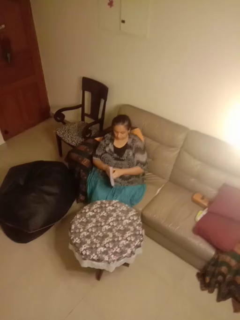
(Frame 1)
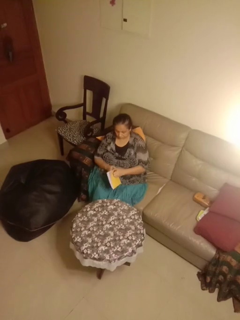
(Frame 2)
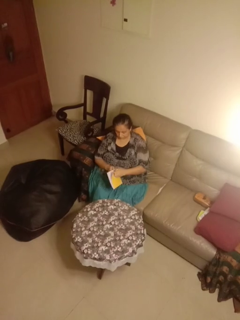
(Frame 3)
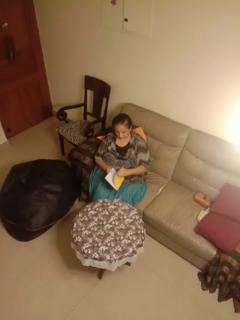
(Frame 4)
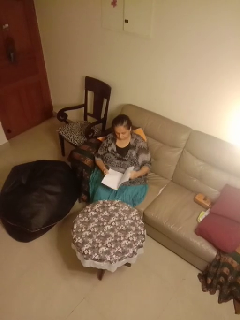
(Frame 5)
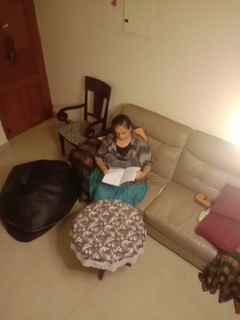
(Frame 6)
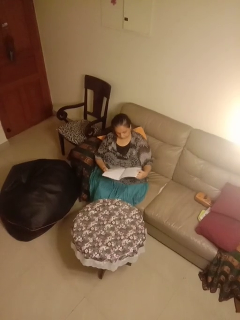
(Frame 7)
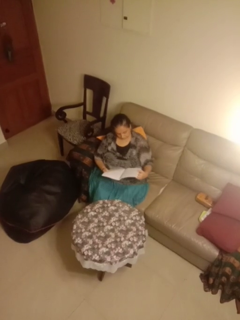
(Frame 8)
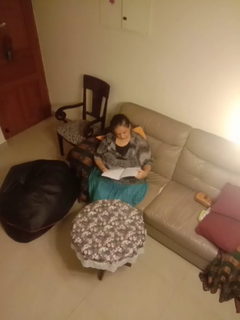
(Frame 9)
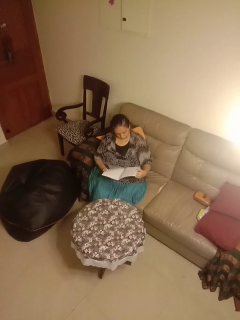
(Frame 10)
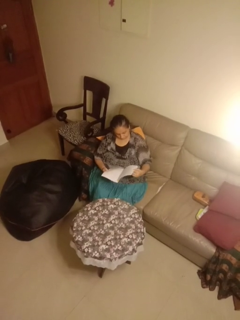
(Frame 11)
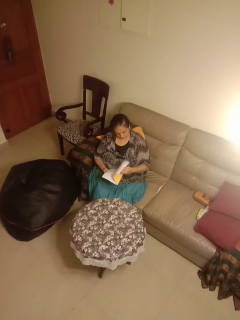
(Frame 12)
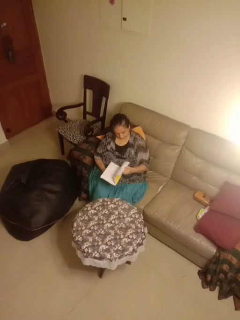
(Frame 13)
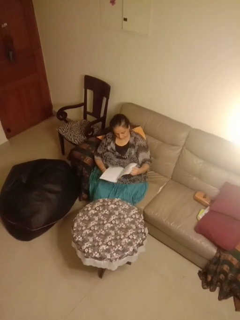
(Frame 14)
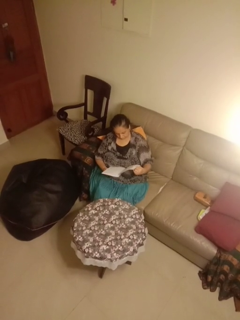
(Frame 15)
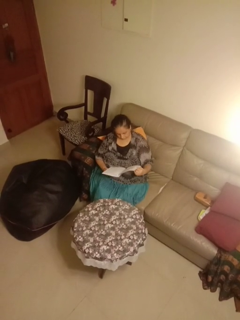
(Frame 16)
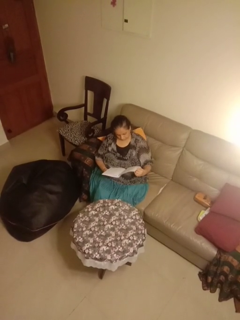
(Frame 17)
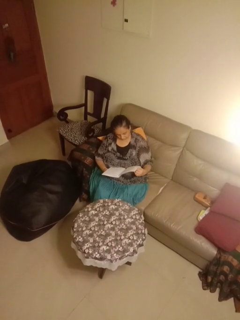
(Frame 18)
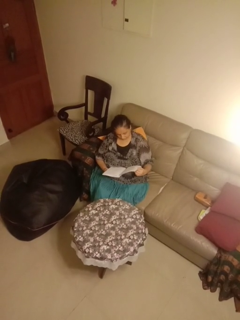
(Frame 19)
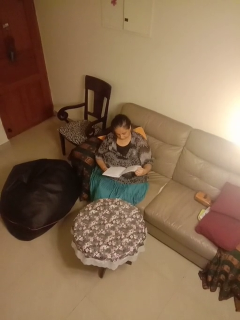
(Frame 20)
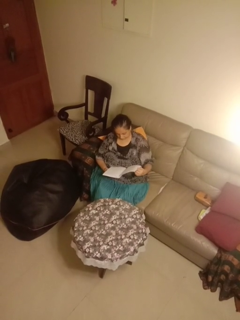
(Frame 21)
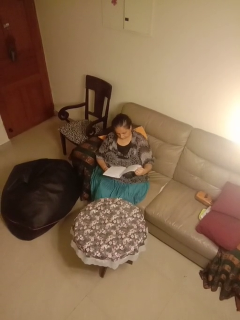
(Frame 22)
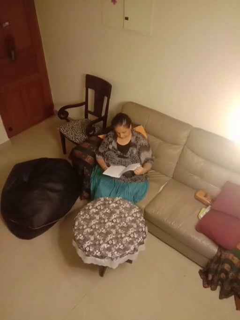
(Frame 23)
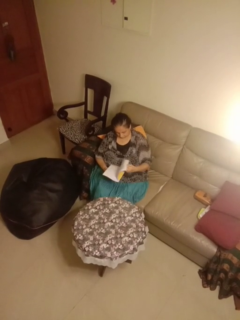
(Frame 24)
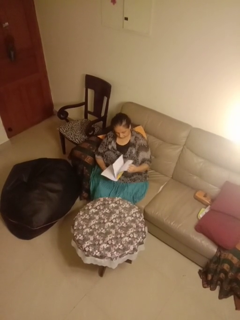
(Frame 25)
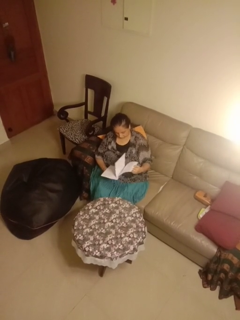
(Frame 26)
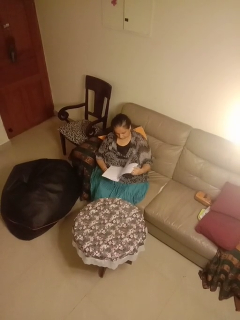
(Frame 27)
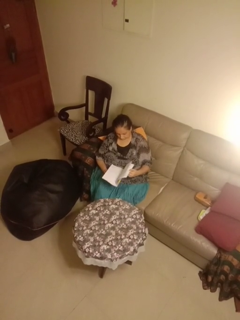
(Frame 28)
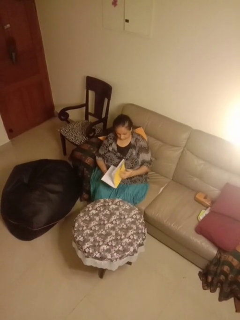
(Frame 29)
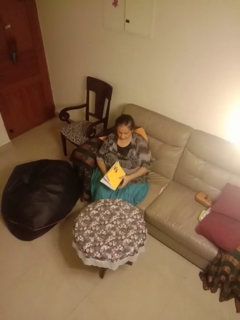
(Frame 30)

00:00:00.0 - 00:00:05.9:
person reads magazine

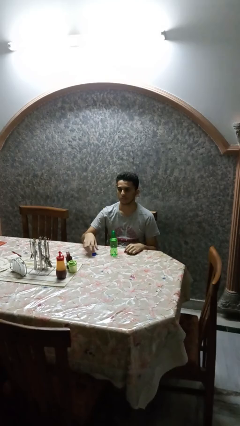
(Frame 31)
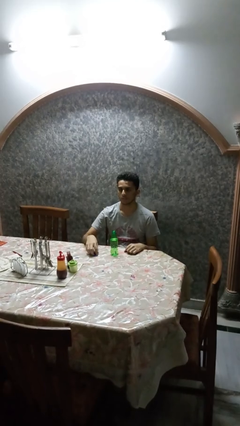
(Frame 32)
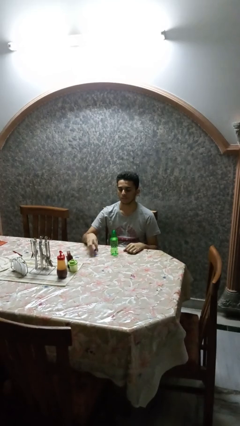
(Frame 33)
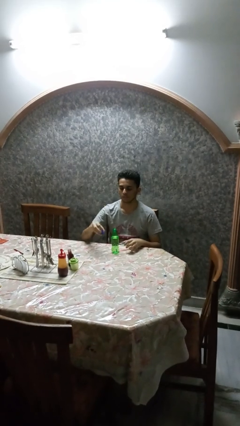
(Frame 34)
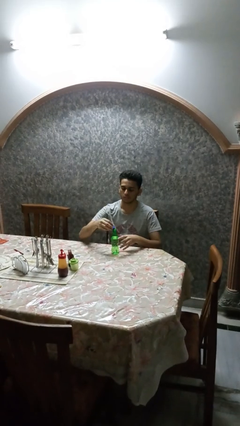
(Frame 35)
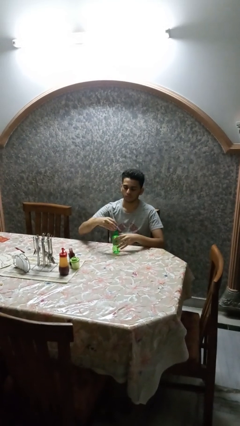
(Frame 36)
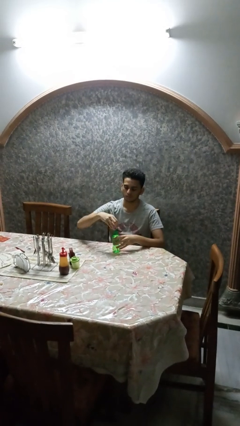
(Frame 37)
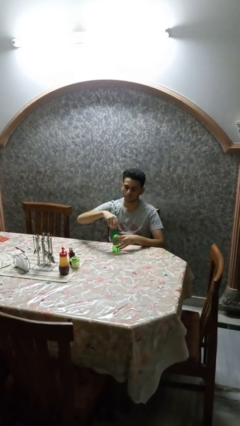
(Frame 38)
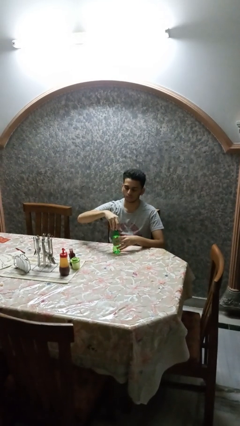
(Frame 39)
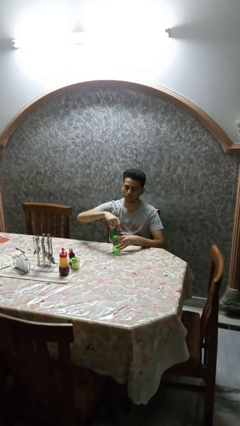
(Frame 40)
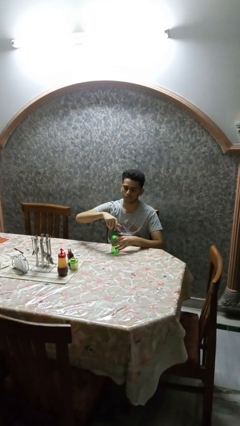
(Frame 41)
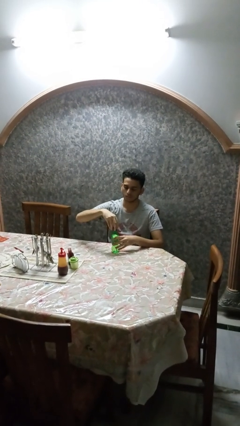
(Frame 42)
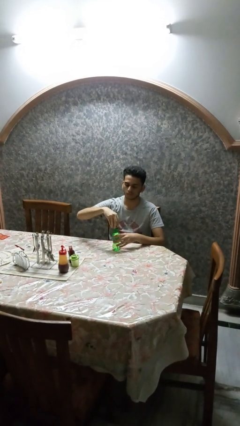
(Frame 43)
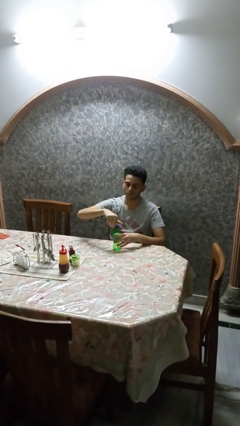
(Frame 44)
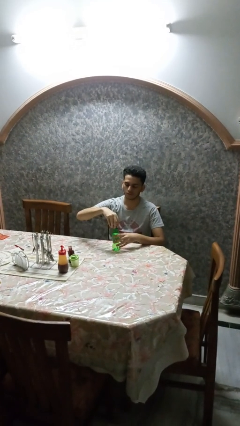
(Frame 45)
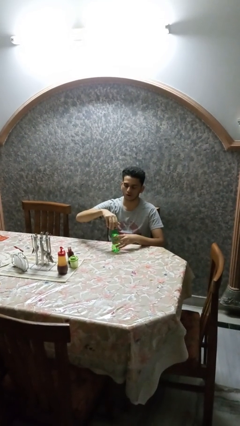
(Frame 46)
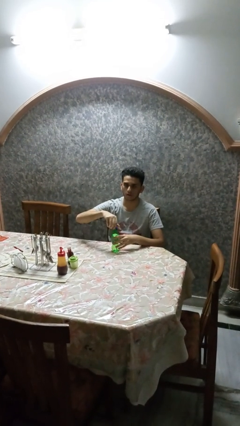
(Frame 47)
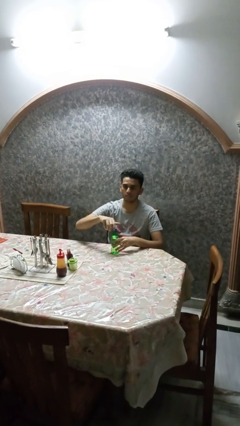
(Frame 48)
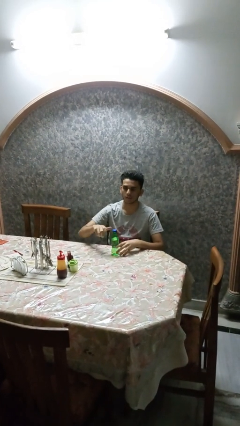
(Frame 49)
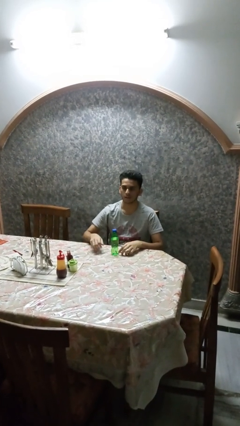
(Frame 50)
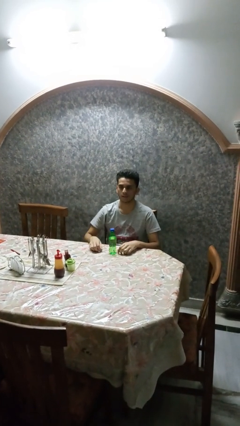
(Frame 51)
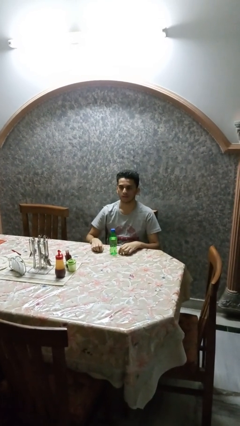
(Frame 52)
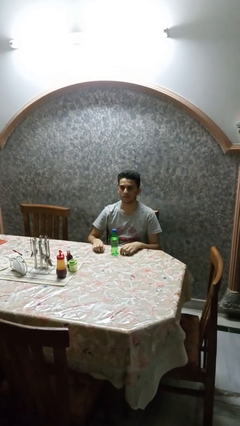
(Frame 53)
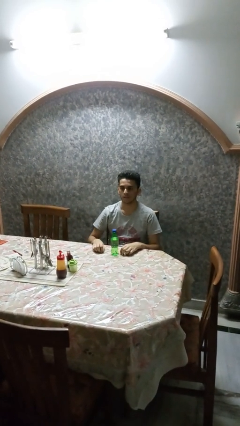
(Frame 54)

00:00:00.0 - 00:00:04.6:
person screws lid to bottle

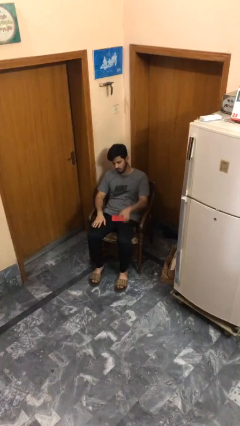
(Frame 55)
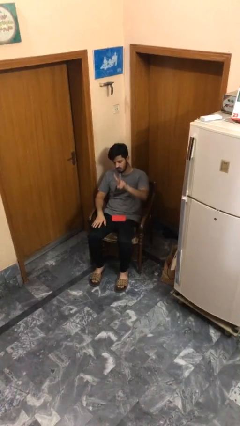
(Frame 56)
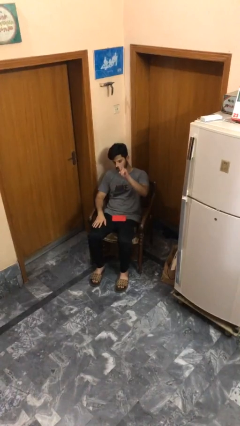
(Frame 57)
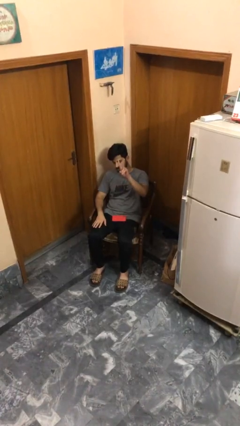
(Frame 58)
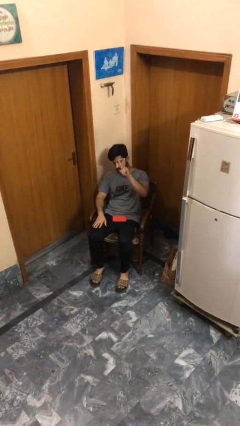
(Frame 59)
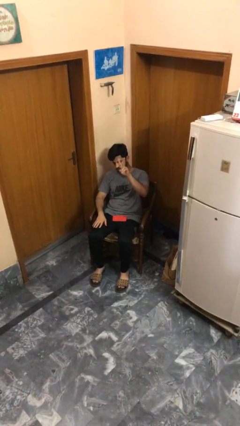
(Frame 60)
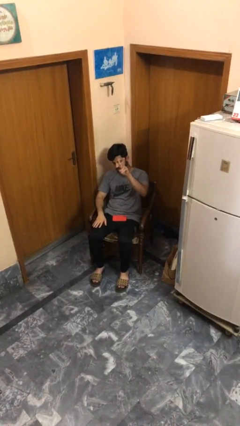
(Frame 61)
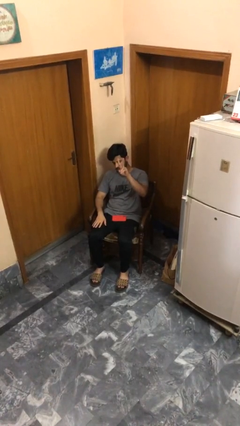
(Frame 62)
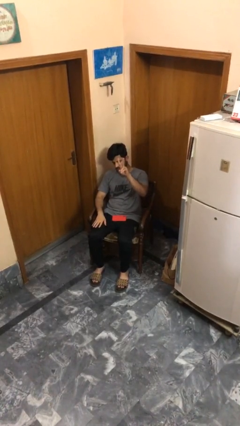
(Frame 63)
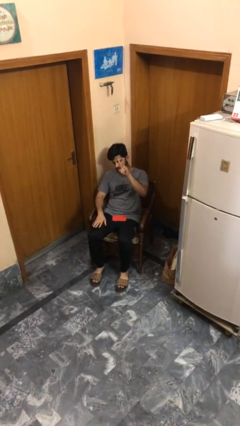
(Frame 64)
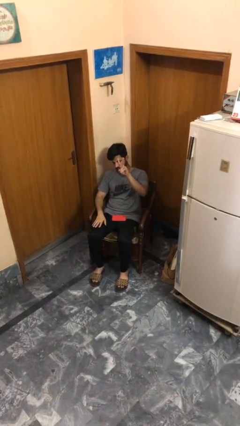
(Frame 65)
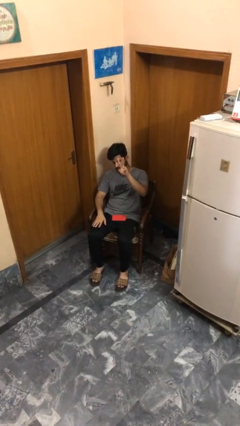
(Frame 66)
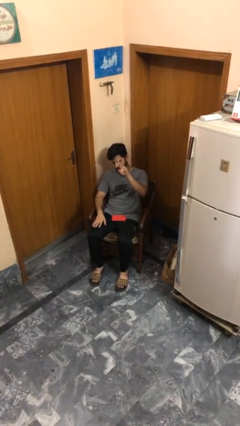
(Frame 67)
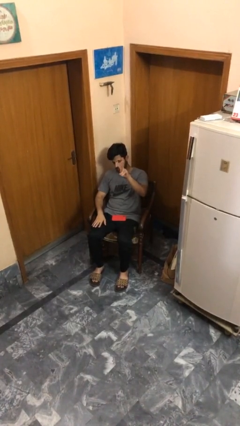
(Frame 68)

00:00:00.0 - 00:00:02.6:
person gestures peace

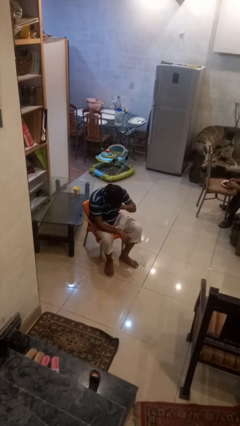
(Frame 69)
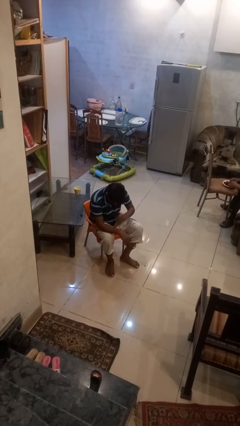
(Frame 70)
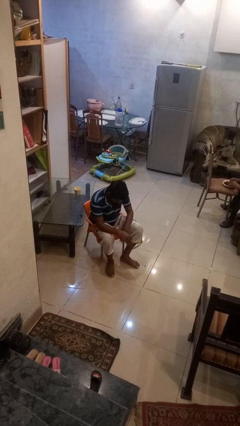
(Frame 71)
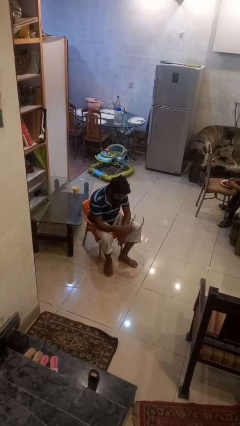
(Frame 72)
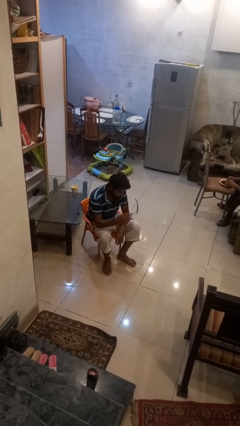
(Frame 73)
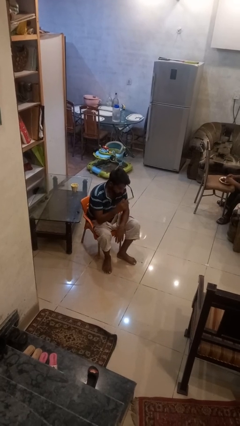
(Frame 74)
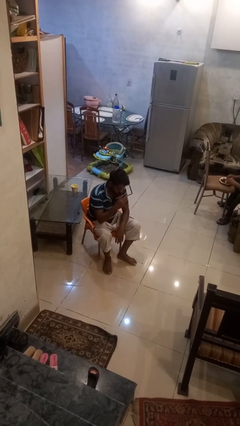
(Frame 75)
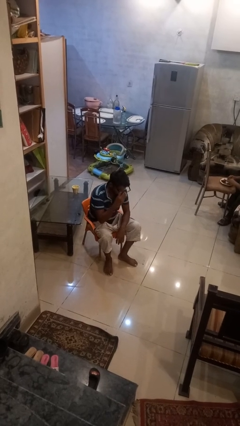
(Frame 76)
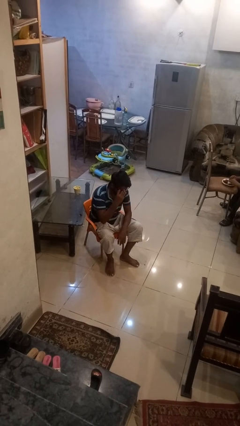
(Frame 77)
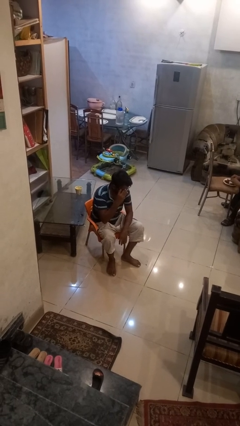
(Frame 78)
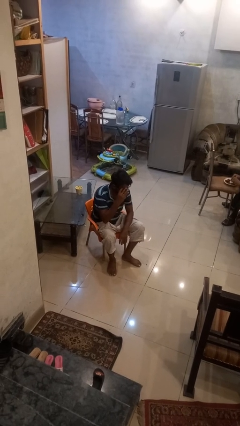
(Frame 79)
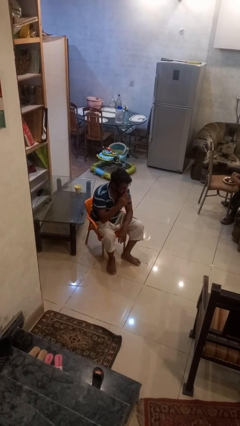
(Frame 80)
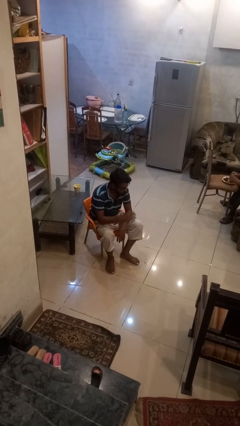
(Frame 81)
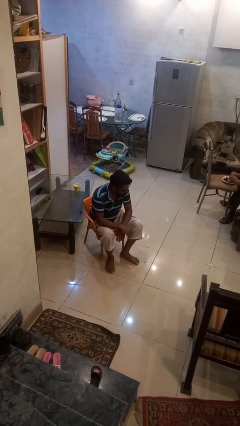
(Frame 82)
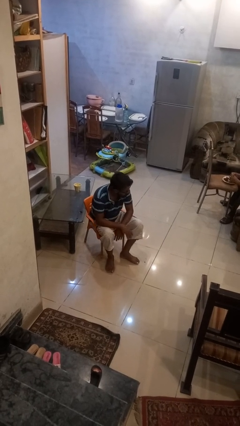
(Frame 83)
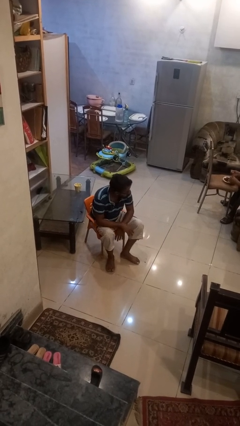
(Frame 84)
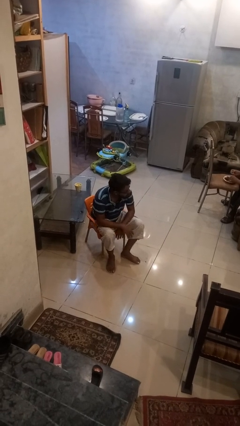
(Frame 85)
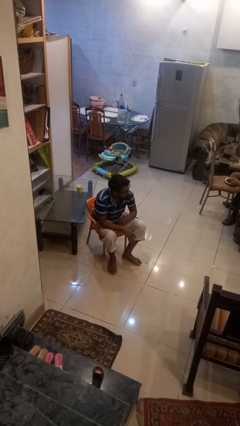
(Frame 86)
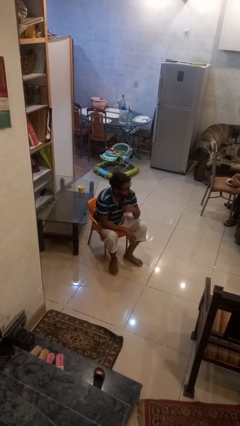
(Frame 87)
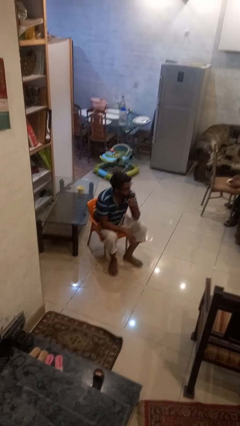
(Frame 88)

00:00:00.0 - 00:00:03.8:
person puts on glasses

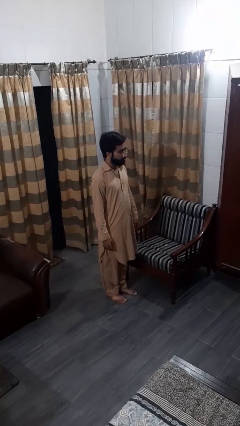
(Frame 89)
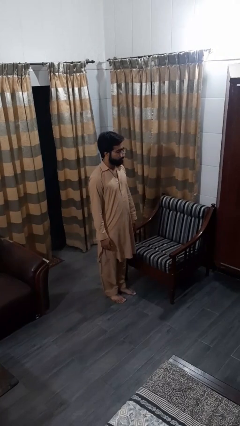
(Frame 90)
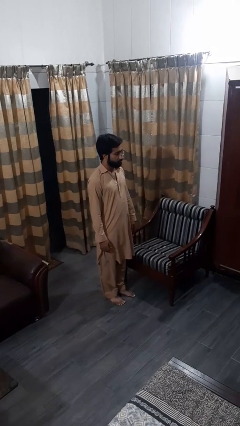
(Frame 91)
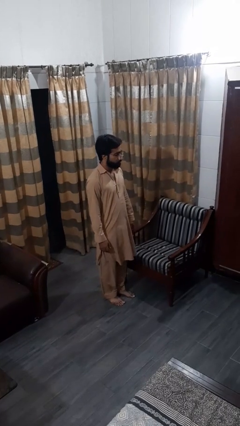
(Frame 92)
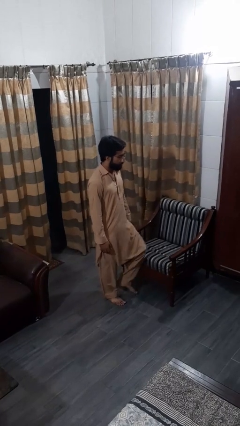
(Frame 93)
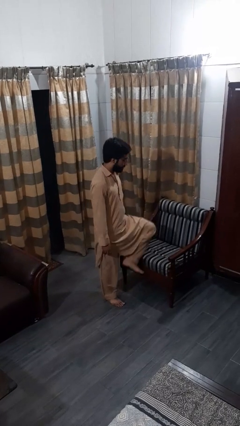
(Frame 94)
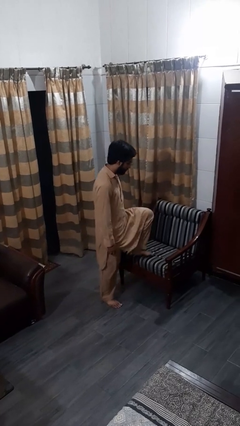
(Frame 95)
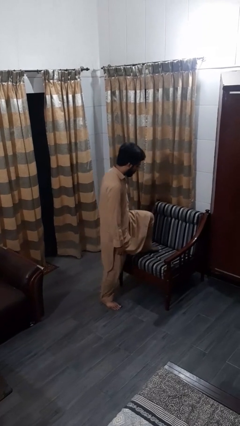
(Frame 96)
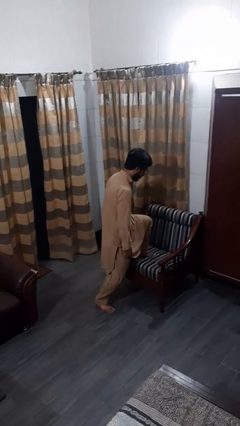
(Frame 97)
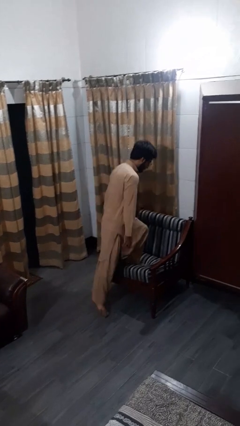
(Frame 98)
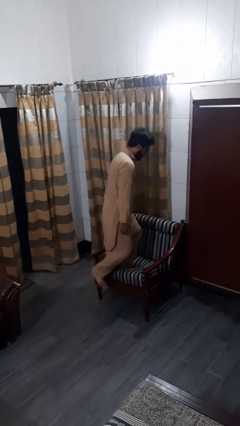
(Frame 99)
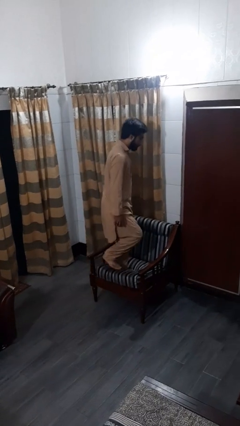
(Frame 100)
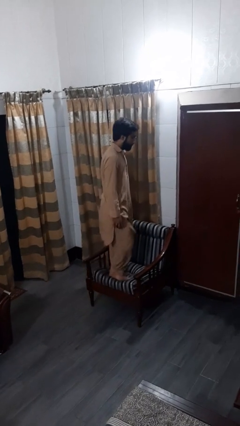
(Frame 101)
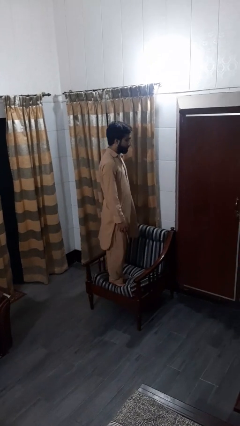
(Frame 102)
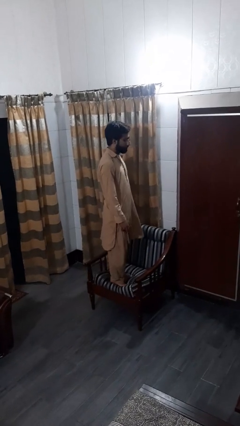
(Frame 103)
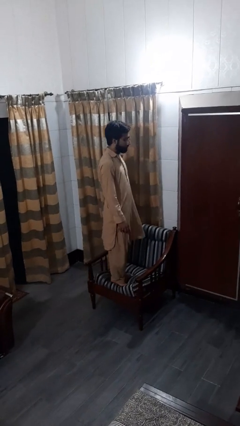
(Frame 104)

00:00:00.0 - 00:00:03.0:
person climbs on chair
